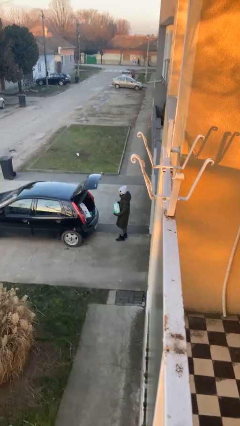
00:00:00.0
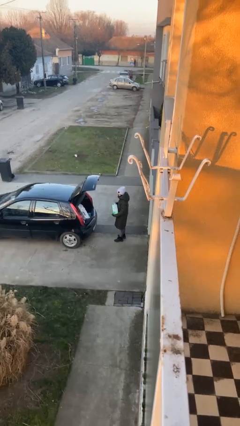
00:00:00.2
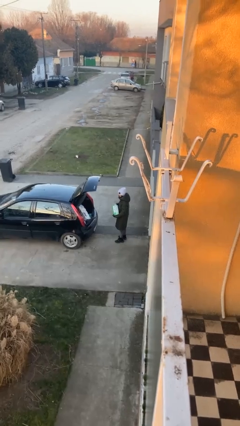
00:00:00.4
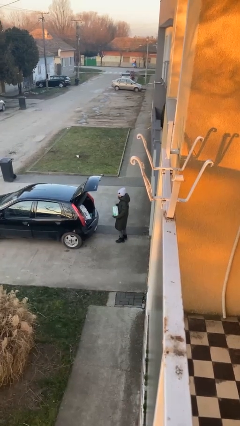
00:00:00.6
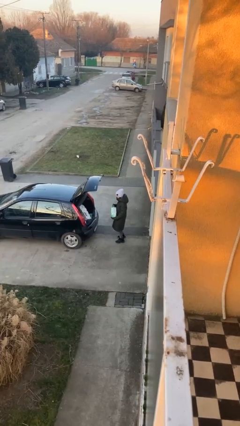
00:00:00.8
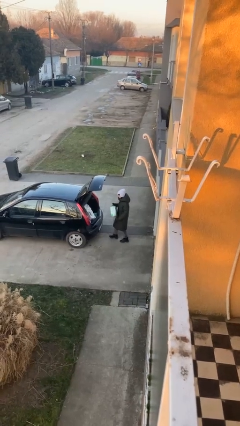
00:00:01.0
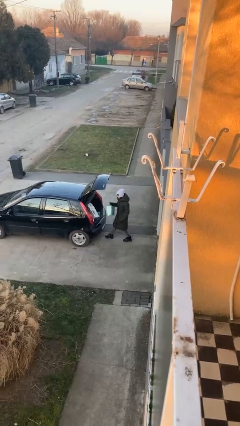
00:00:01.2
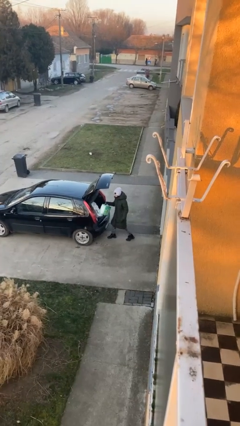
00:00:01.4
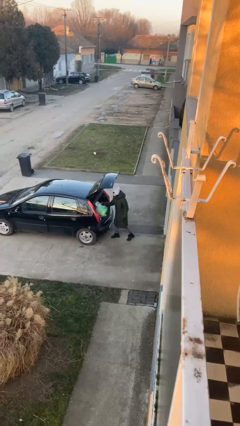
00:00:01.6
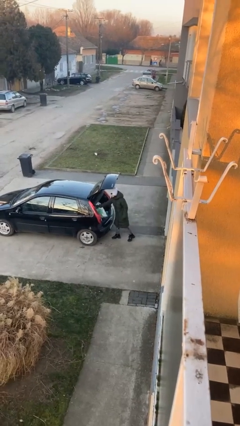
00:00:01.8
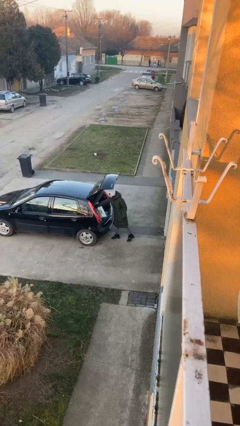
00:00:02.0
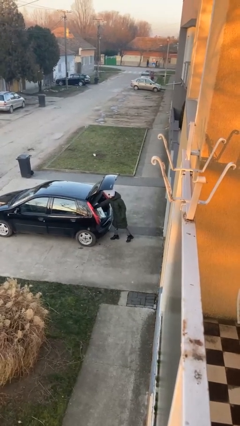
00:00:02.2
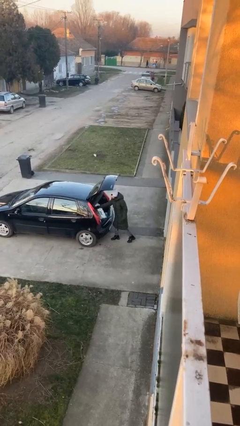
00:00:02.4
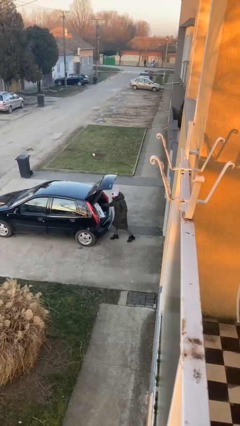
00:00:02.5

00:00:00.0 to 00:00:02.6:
person loads car

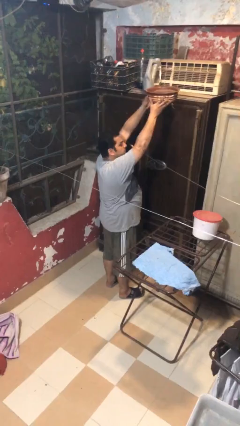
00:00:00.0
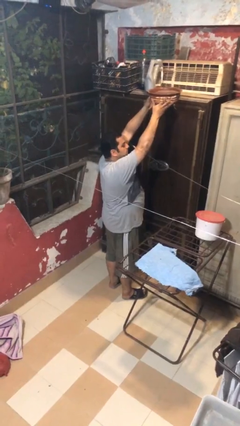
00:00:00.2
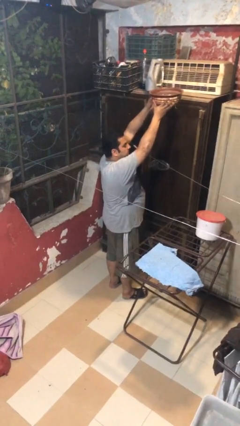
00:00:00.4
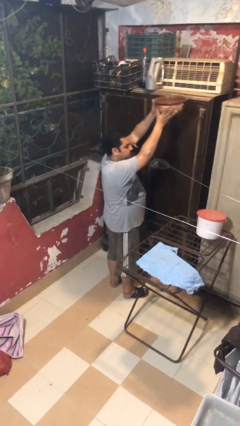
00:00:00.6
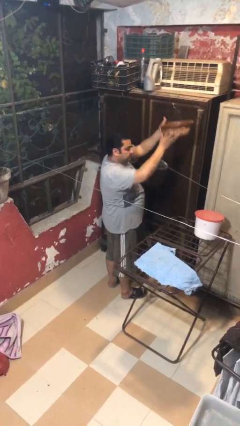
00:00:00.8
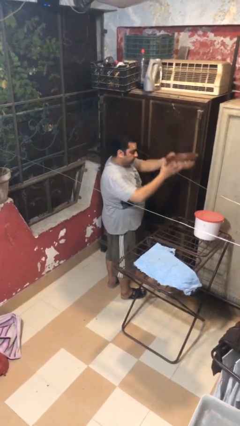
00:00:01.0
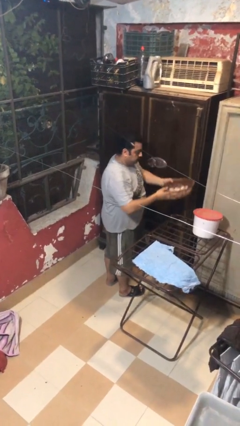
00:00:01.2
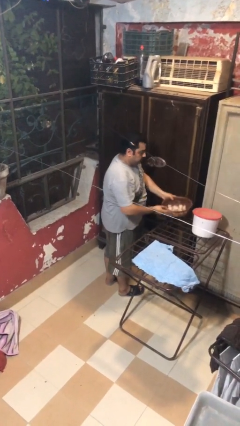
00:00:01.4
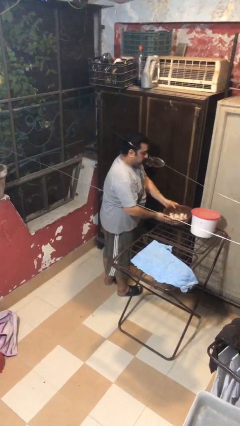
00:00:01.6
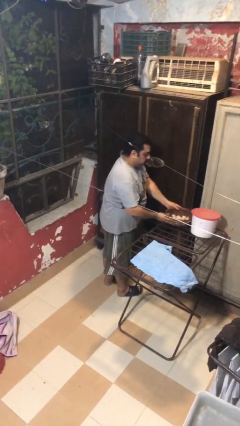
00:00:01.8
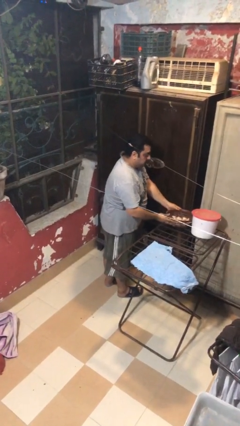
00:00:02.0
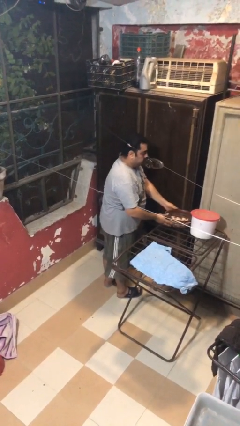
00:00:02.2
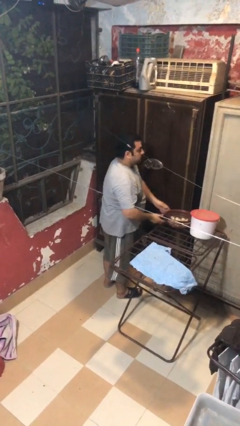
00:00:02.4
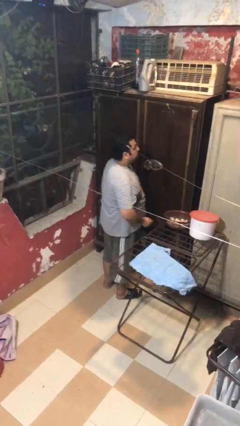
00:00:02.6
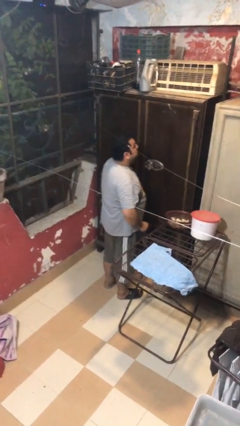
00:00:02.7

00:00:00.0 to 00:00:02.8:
person puts down object on shelf

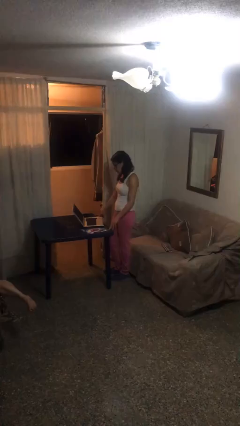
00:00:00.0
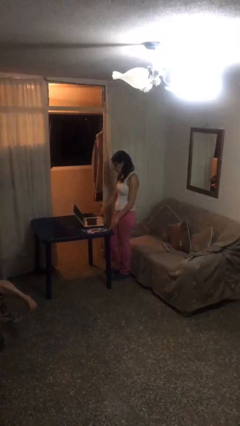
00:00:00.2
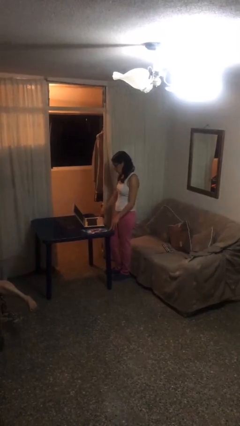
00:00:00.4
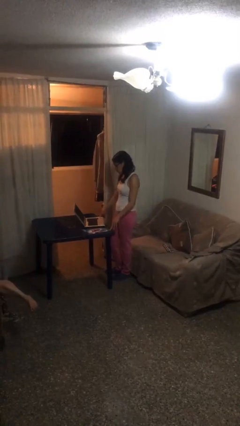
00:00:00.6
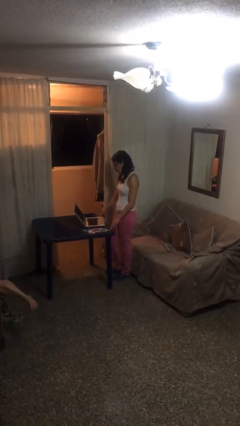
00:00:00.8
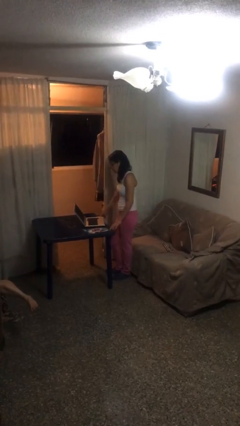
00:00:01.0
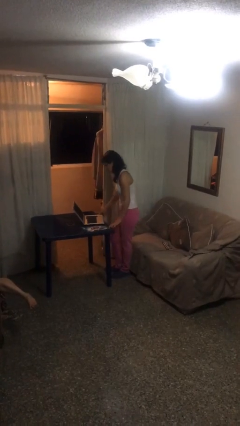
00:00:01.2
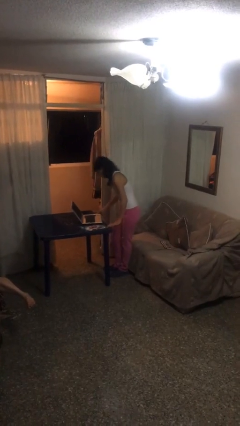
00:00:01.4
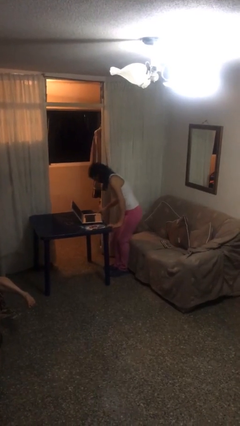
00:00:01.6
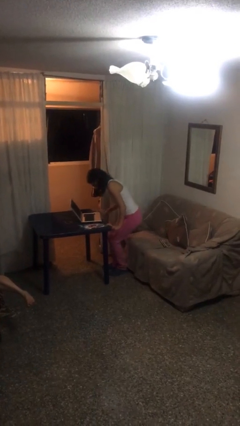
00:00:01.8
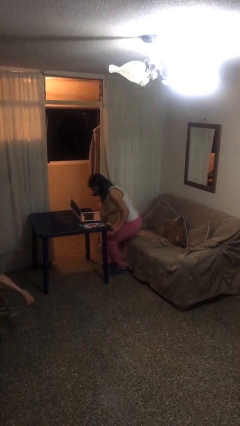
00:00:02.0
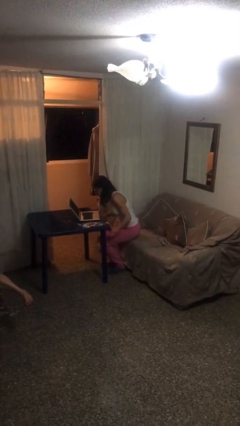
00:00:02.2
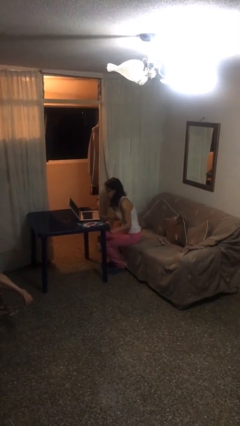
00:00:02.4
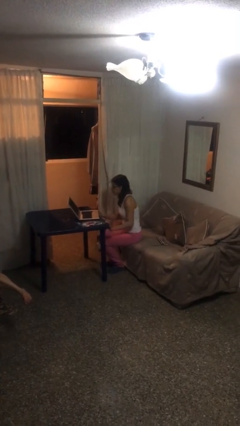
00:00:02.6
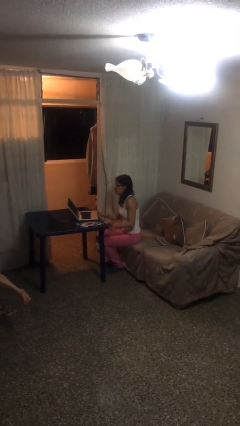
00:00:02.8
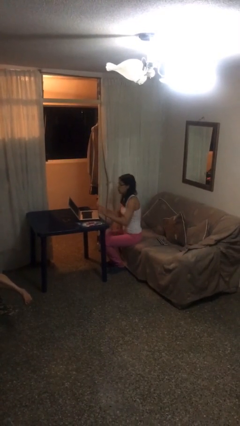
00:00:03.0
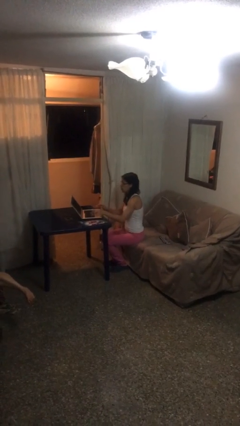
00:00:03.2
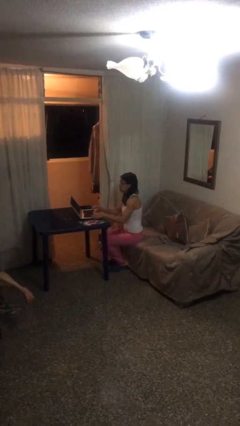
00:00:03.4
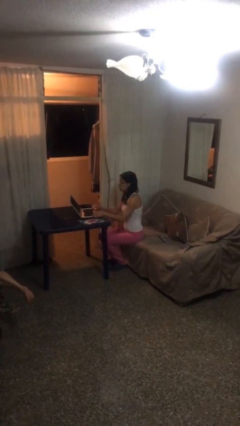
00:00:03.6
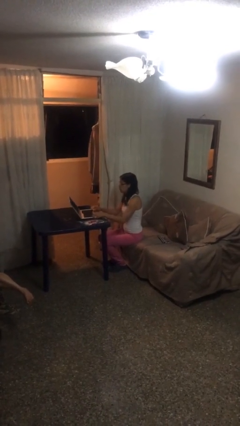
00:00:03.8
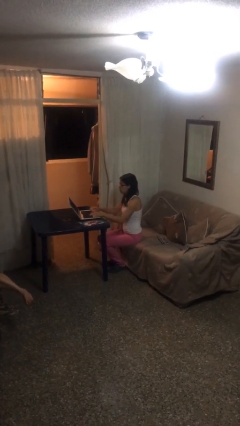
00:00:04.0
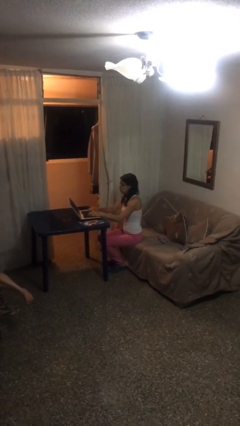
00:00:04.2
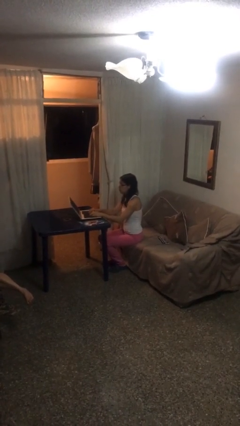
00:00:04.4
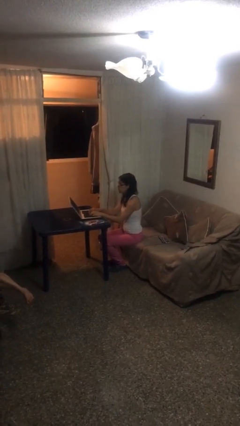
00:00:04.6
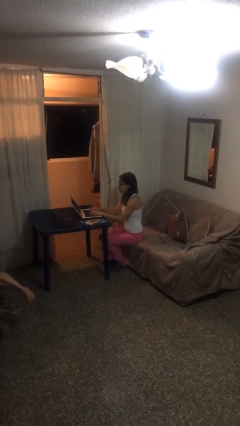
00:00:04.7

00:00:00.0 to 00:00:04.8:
person sits down

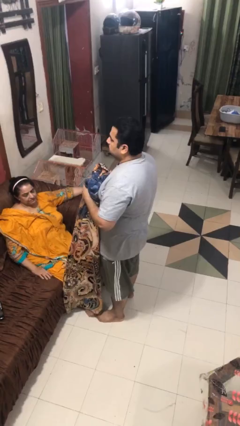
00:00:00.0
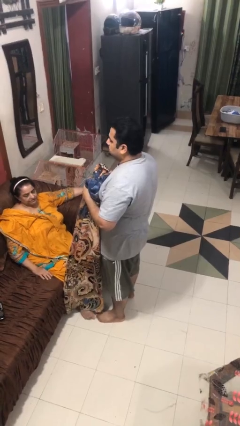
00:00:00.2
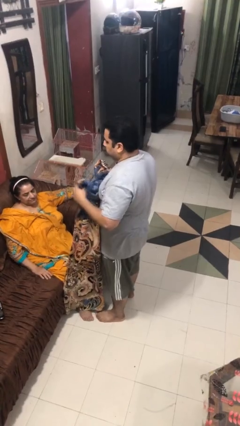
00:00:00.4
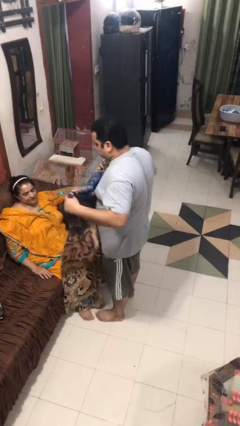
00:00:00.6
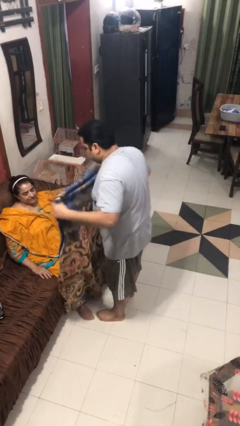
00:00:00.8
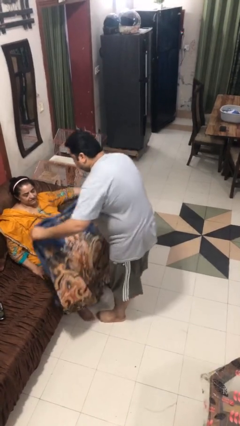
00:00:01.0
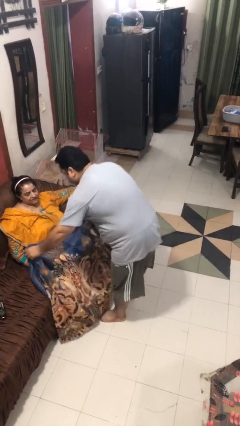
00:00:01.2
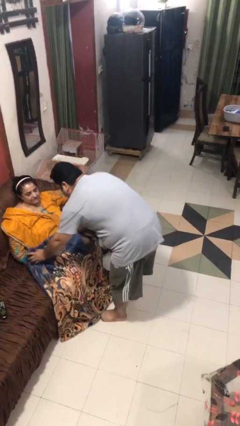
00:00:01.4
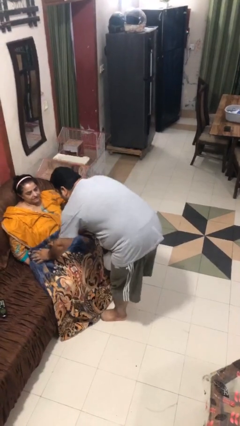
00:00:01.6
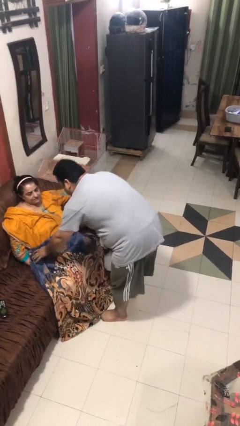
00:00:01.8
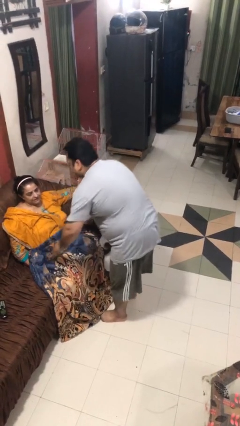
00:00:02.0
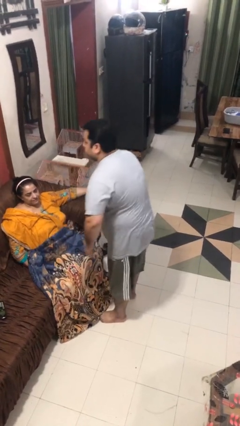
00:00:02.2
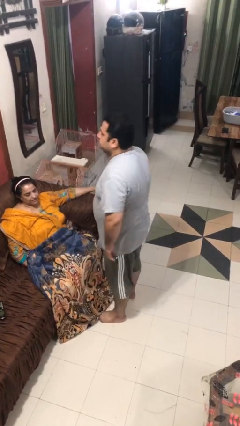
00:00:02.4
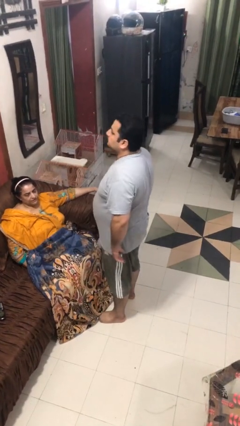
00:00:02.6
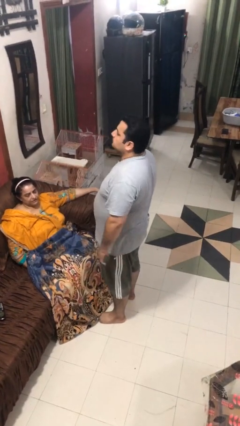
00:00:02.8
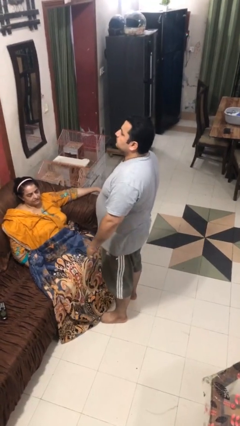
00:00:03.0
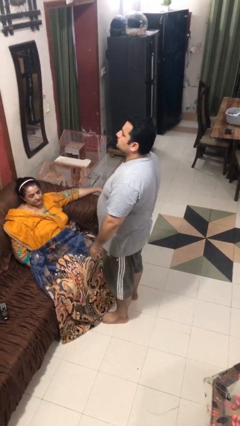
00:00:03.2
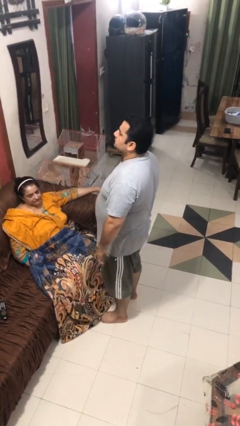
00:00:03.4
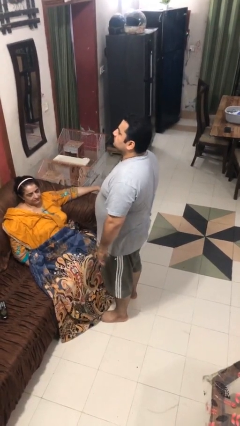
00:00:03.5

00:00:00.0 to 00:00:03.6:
person covers friend with blanket

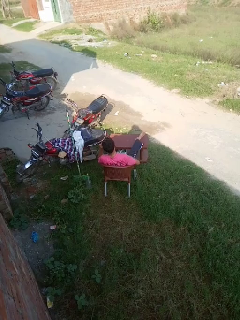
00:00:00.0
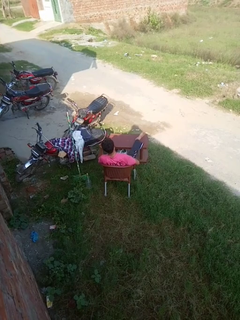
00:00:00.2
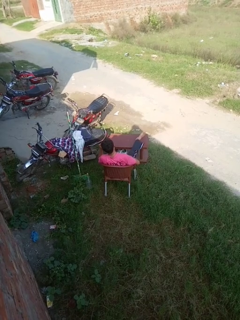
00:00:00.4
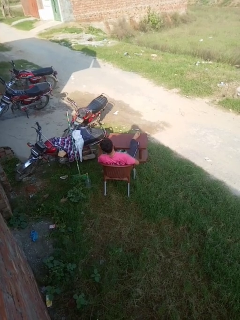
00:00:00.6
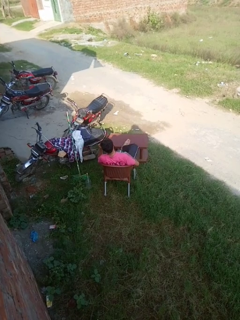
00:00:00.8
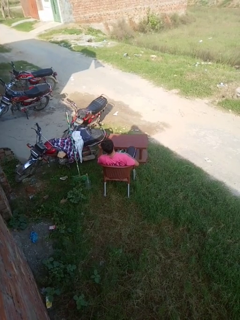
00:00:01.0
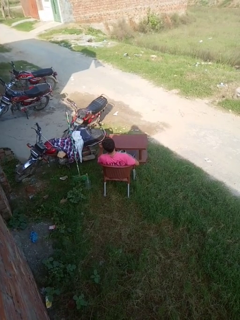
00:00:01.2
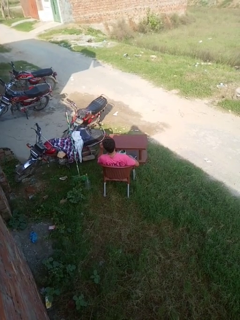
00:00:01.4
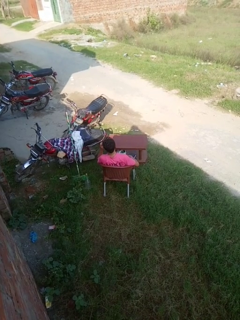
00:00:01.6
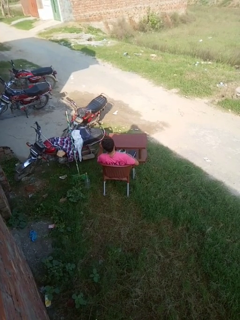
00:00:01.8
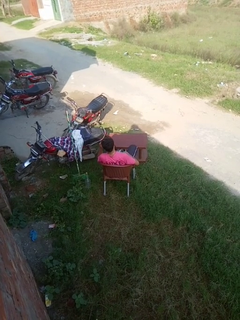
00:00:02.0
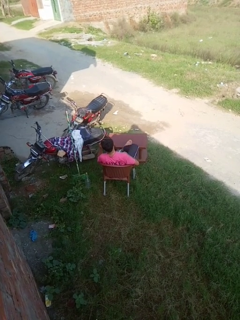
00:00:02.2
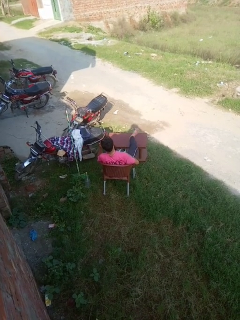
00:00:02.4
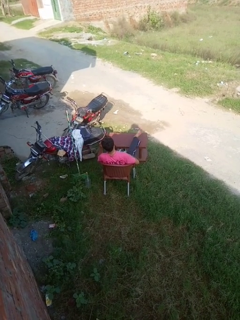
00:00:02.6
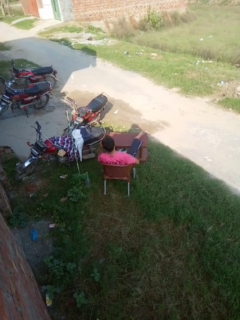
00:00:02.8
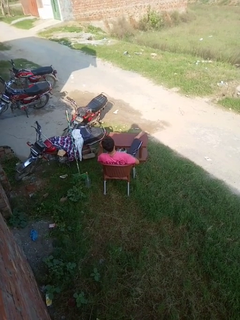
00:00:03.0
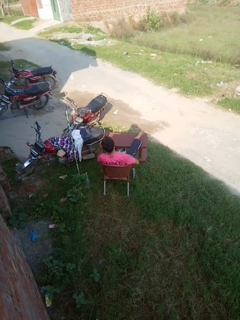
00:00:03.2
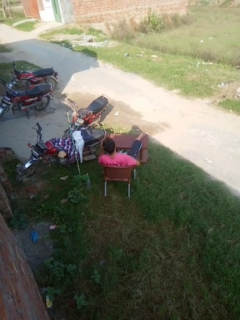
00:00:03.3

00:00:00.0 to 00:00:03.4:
person puts feet up

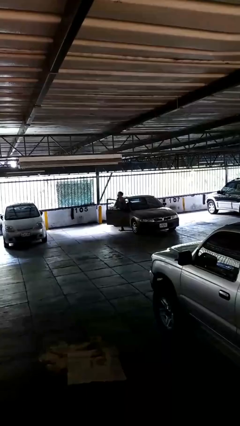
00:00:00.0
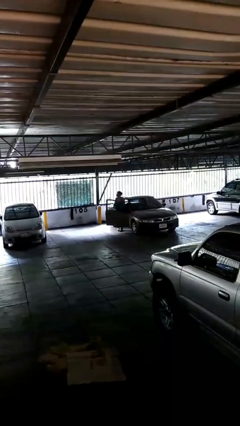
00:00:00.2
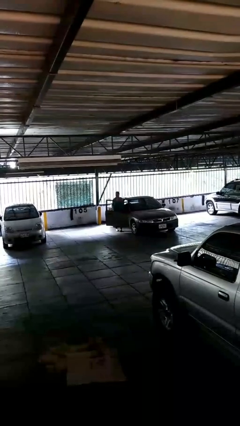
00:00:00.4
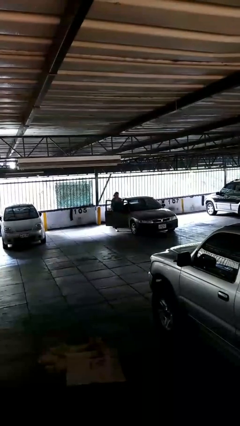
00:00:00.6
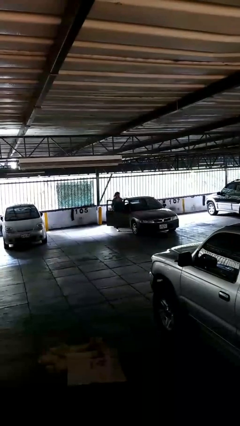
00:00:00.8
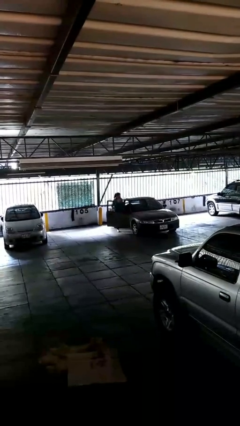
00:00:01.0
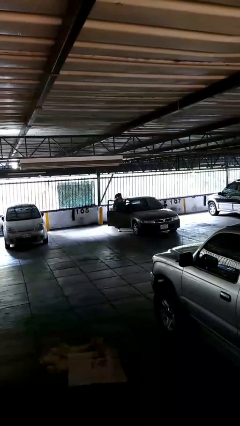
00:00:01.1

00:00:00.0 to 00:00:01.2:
person exits car
